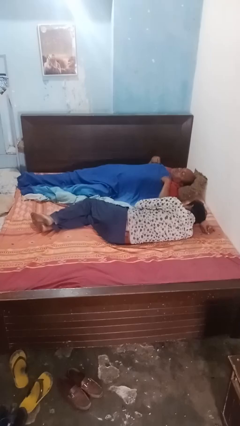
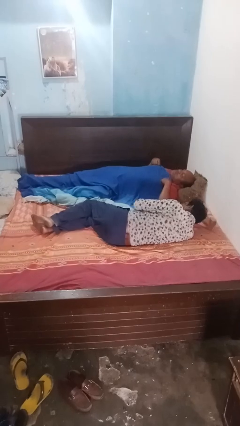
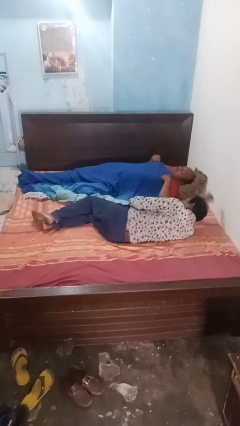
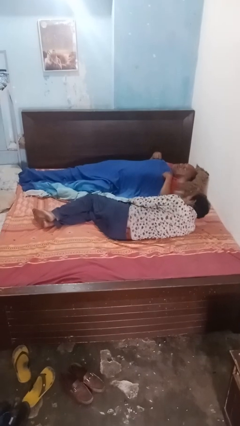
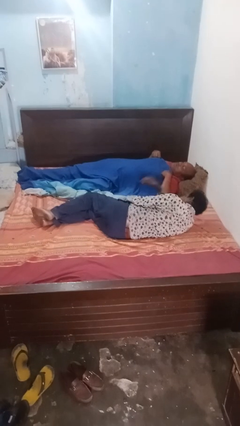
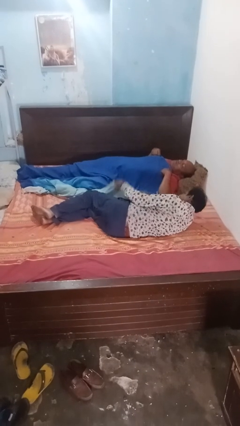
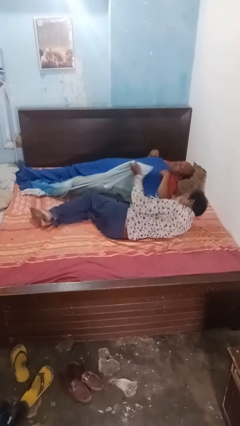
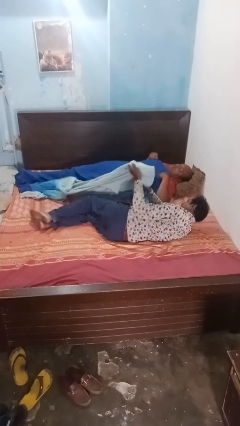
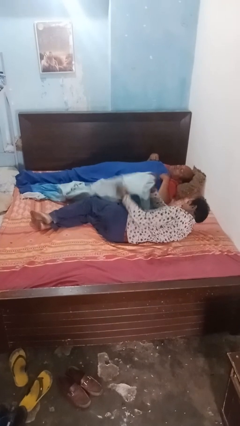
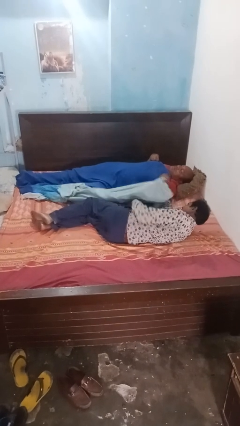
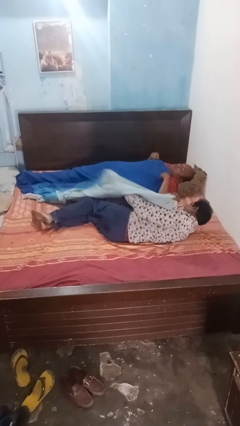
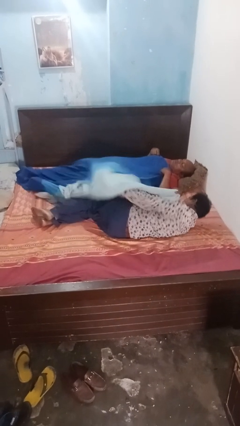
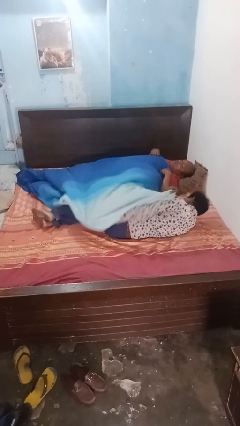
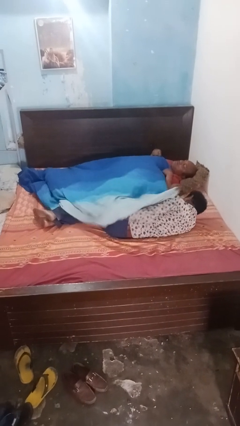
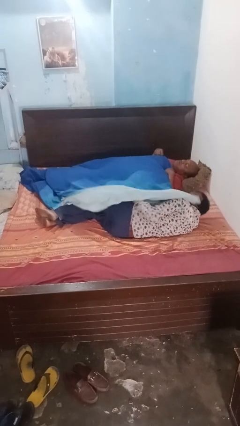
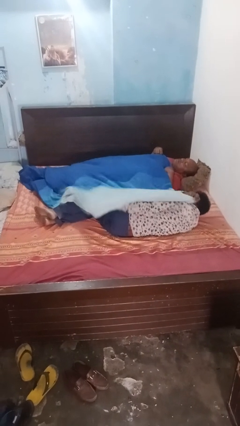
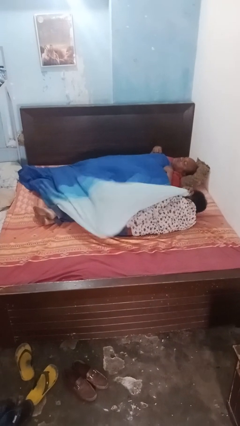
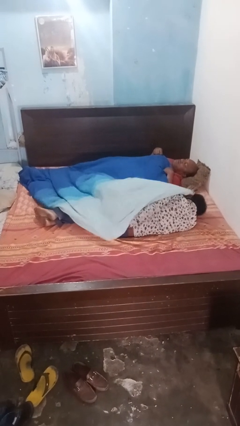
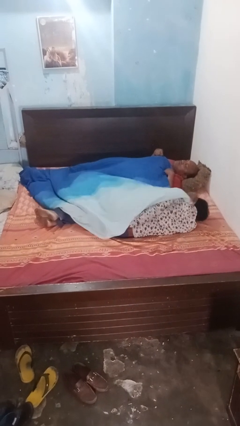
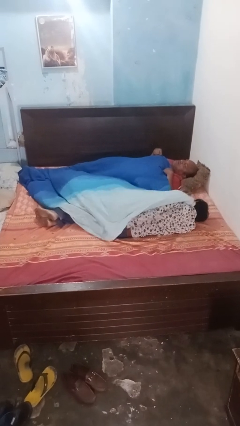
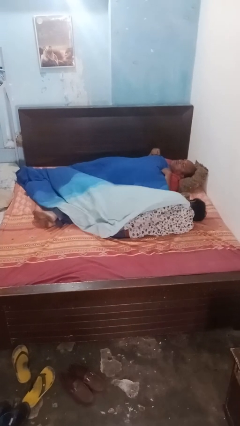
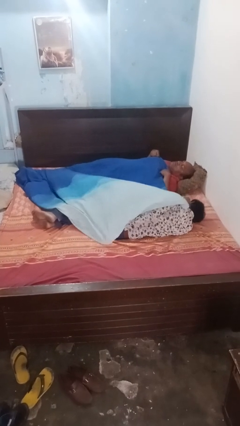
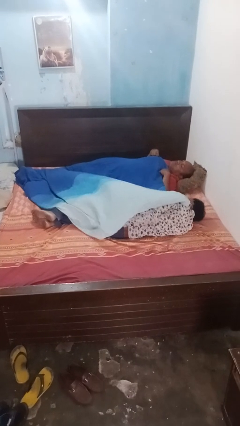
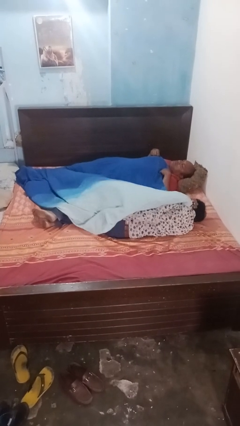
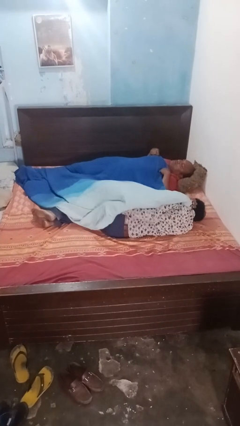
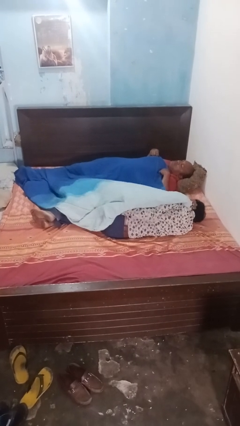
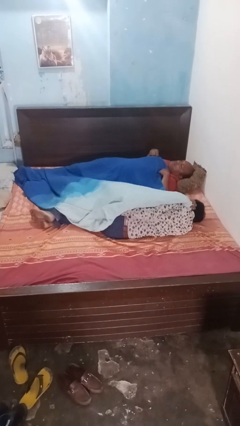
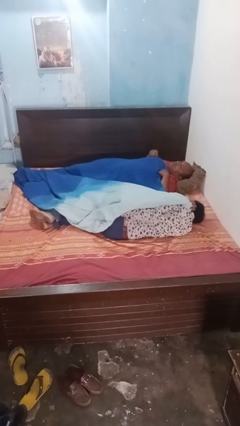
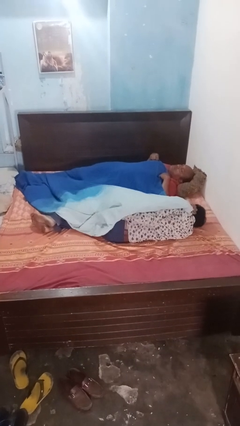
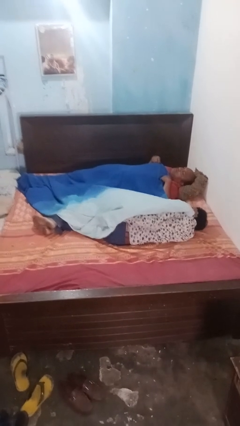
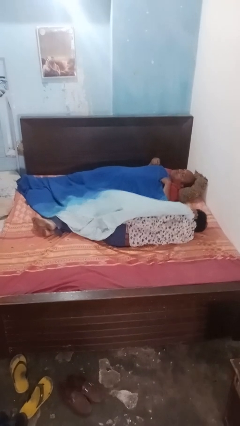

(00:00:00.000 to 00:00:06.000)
person covers friend with blanket

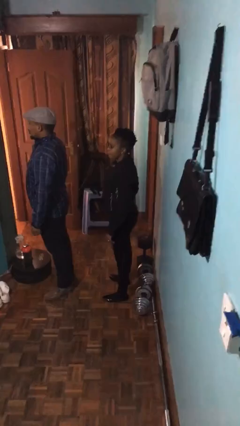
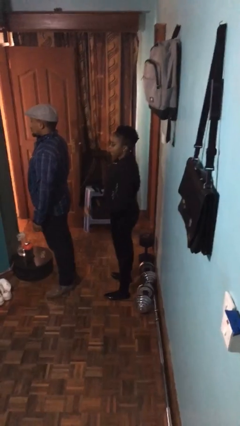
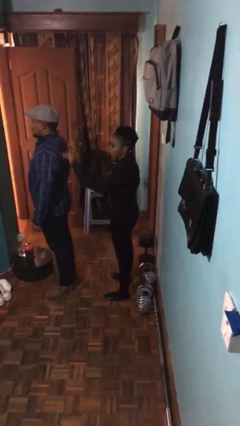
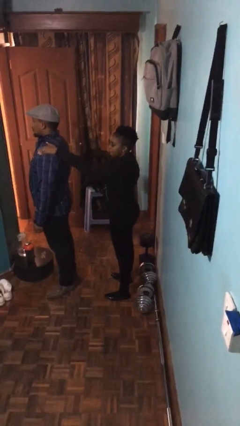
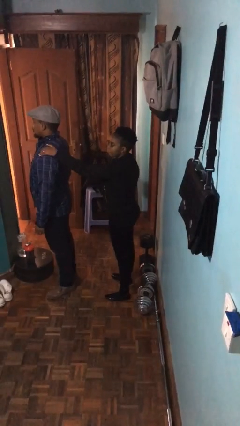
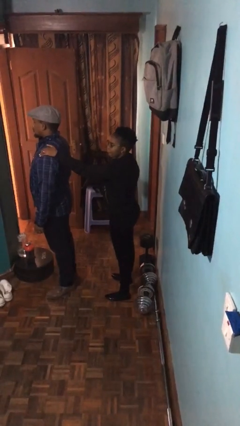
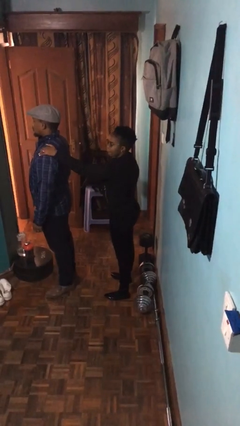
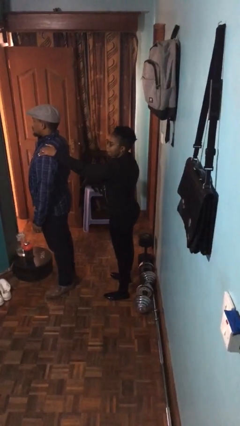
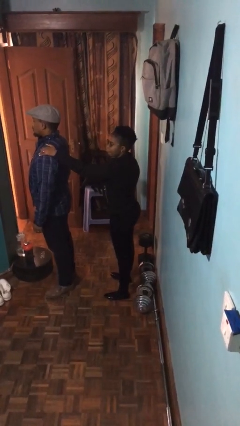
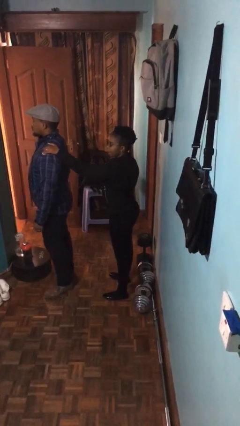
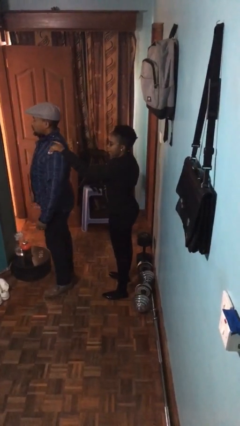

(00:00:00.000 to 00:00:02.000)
person grabs person by shoulder

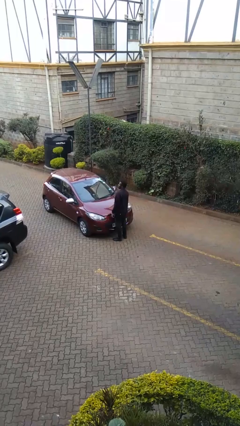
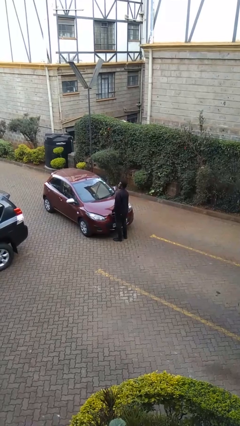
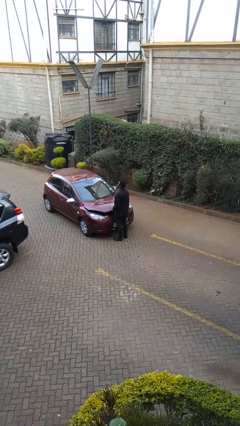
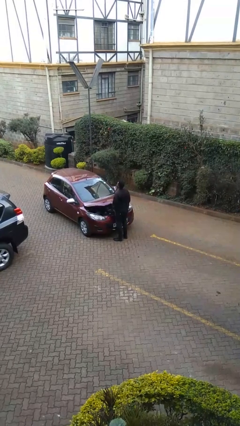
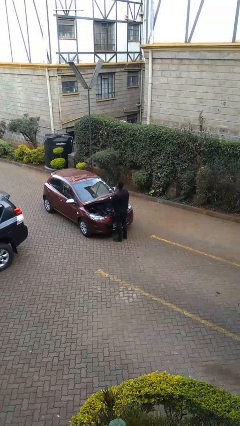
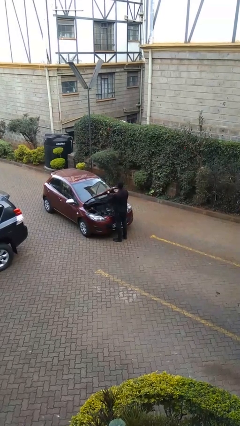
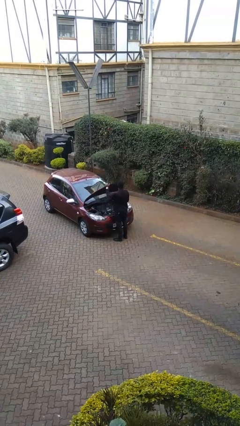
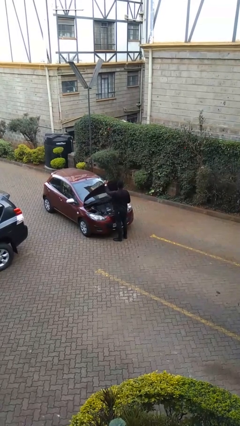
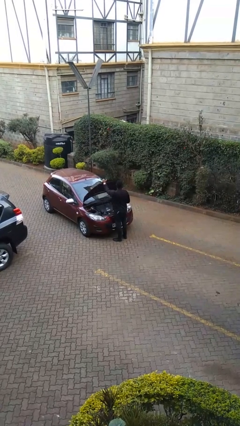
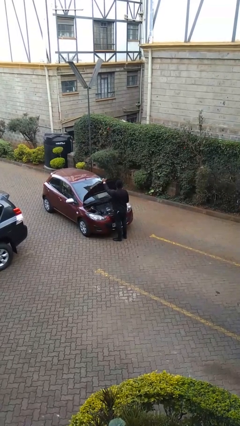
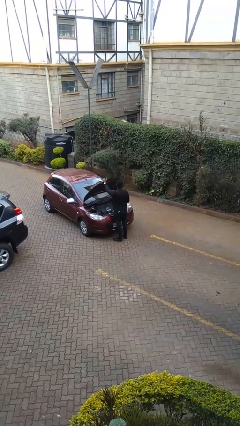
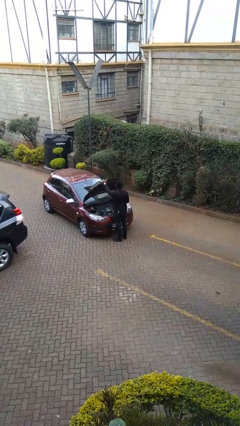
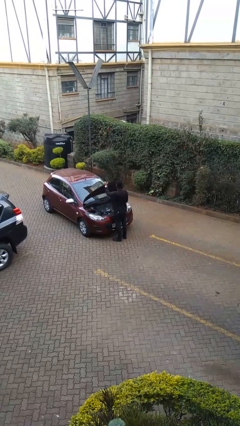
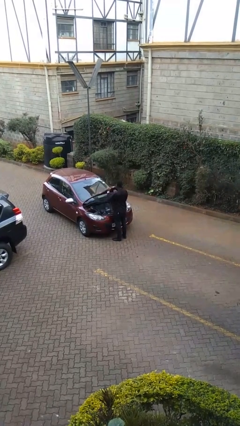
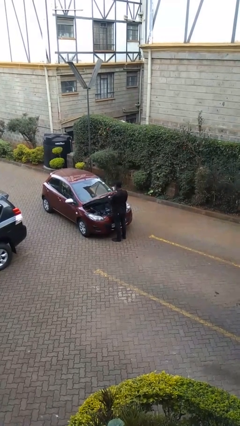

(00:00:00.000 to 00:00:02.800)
person opens car hood

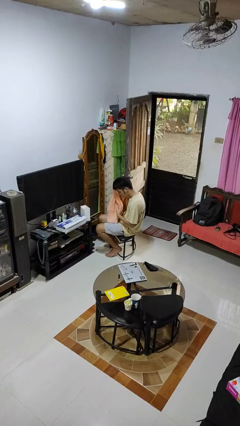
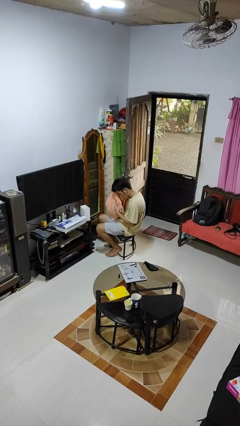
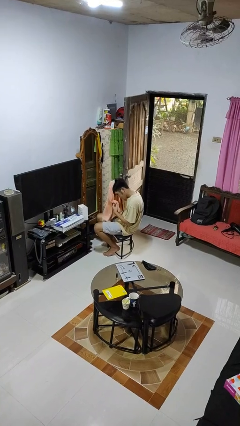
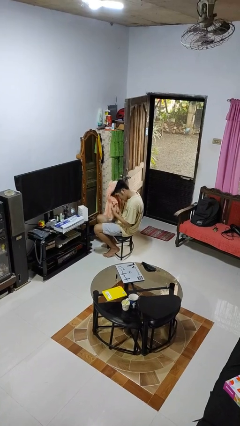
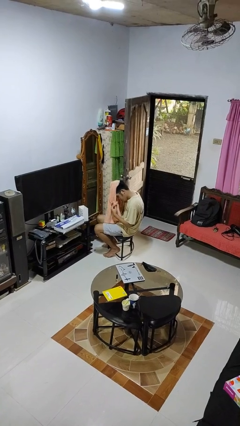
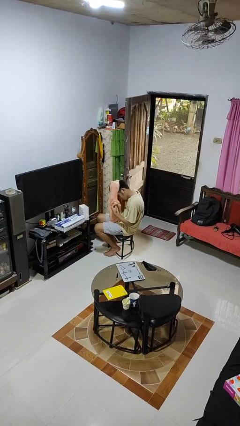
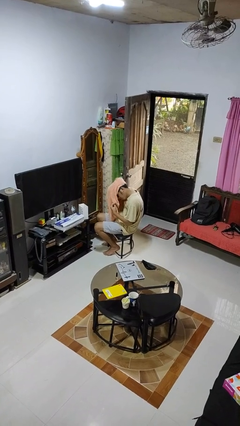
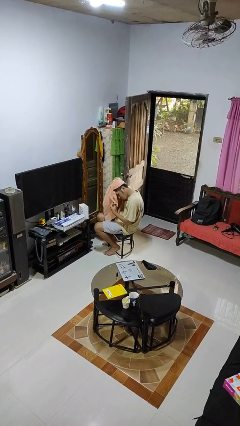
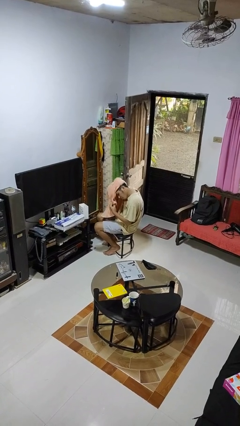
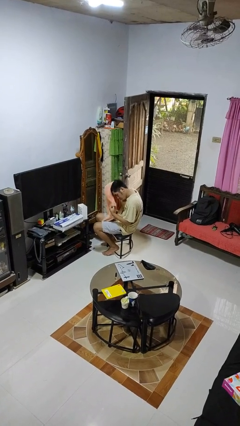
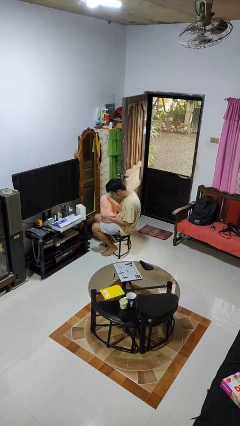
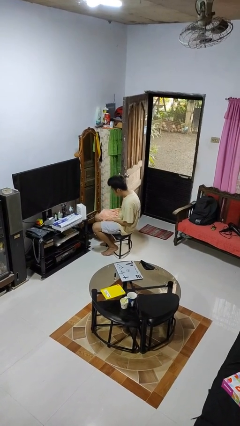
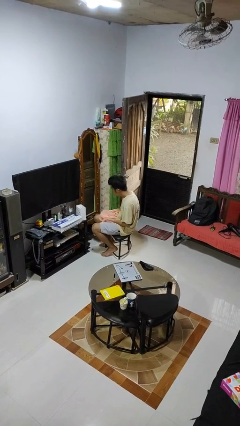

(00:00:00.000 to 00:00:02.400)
person dries hair with towel

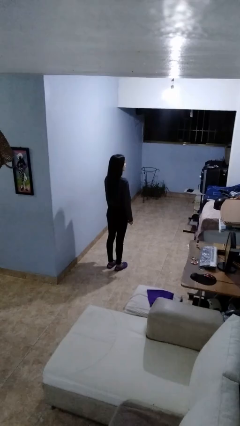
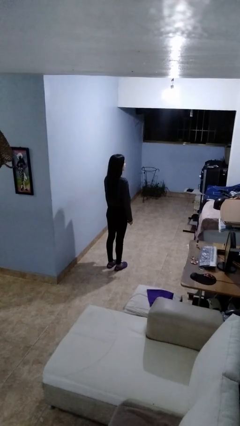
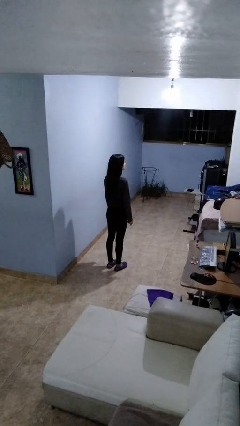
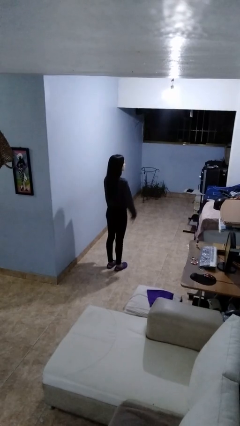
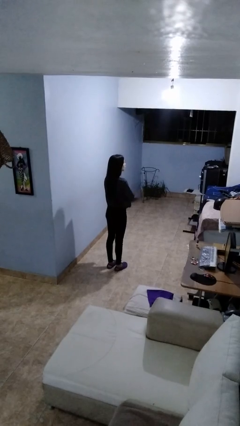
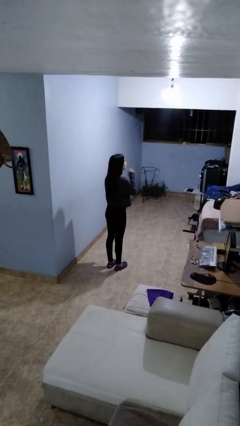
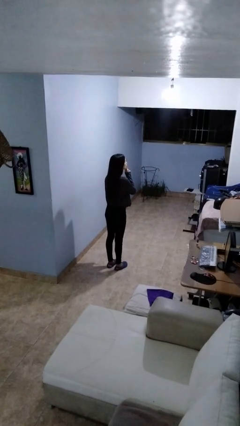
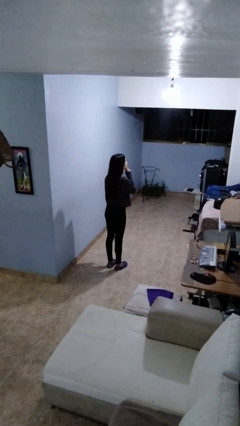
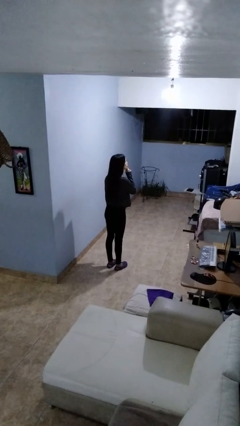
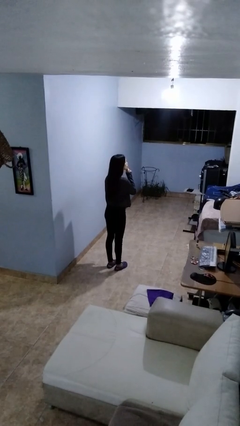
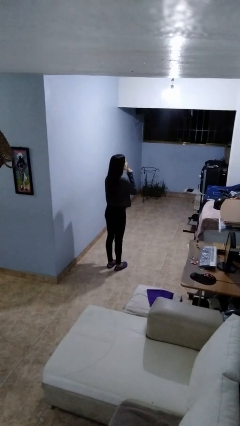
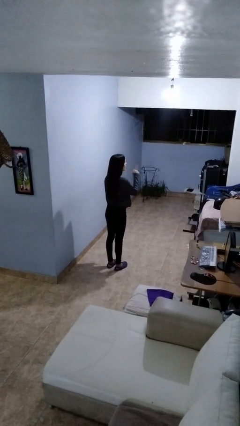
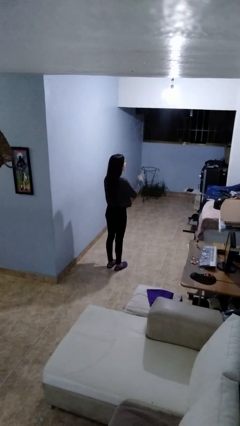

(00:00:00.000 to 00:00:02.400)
person gestures be quiet

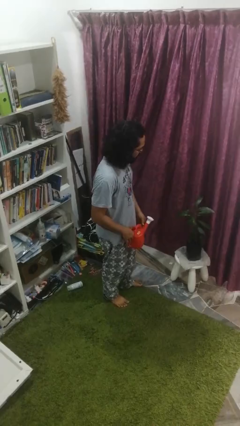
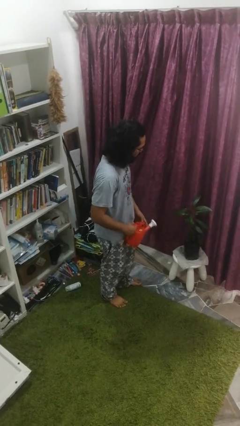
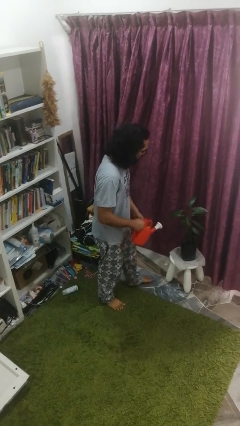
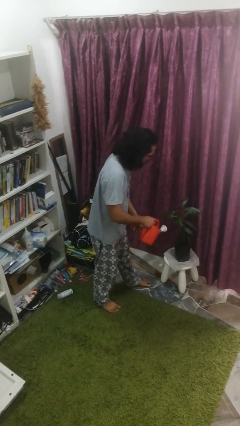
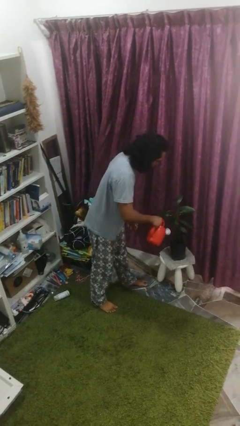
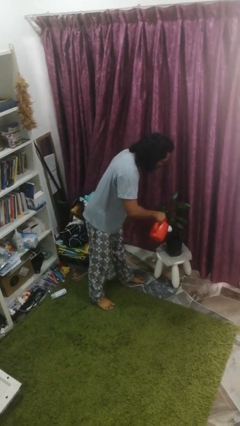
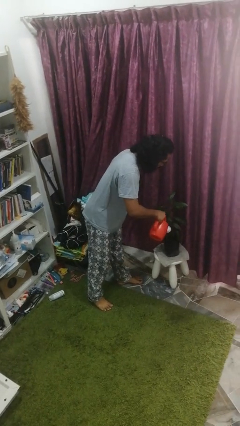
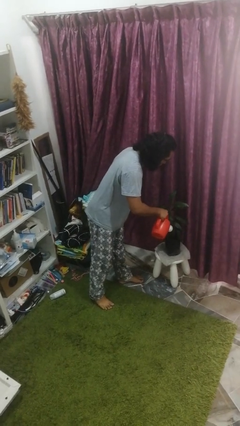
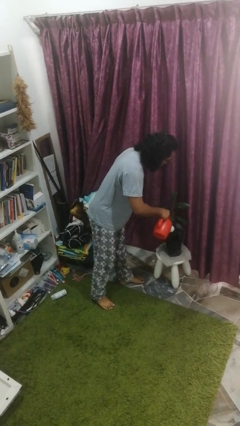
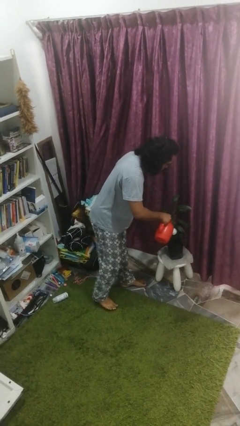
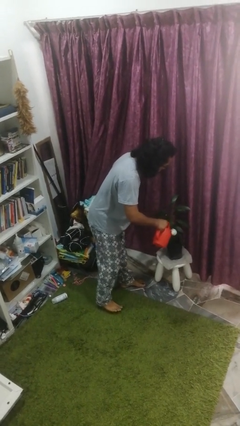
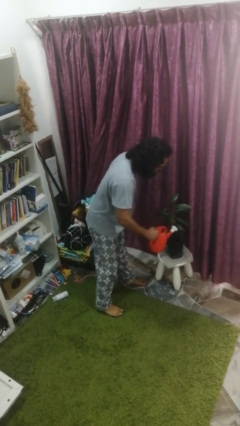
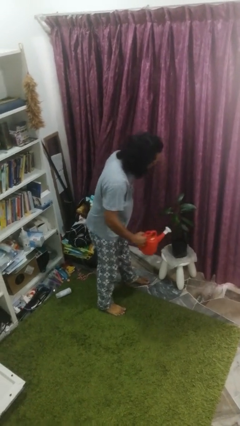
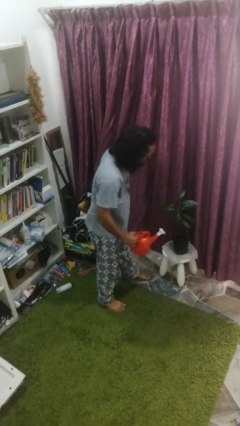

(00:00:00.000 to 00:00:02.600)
person waters houseplant
